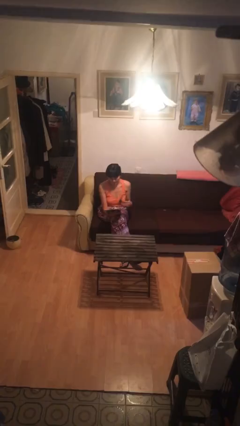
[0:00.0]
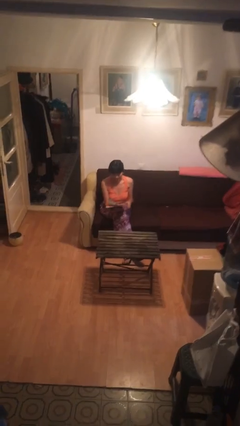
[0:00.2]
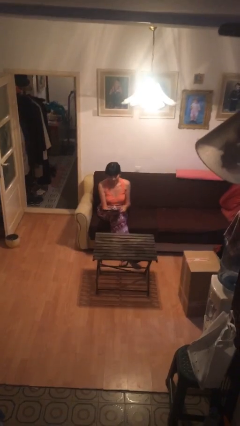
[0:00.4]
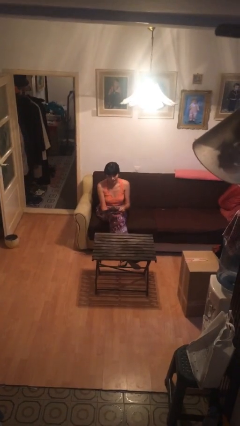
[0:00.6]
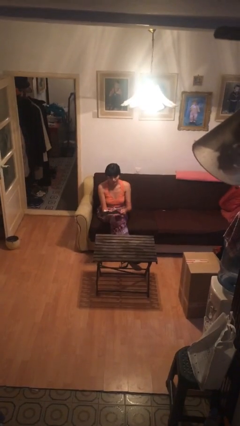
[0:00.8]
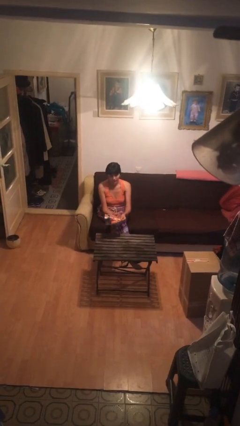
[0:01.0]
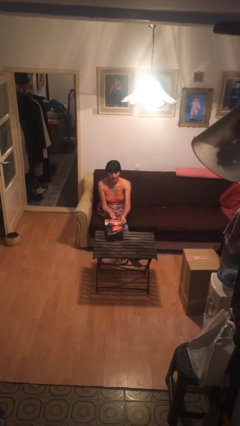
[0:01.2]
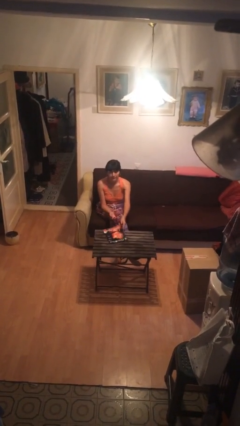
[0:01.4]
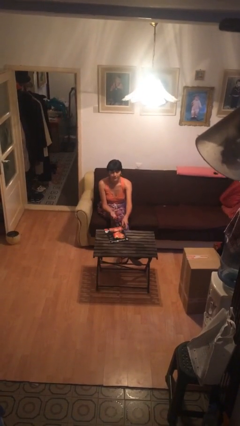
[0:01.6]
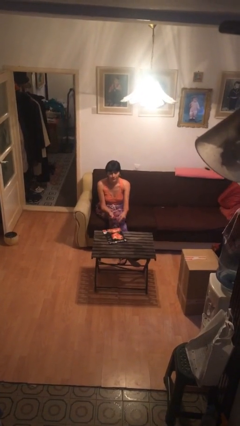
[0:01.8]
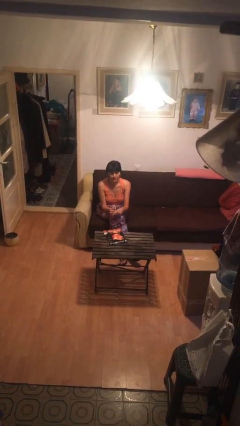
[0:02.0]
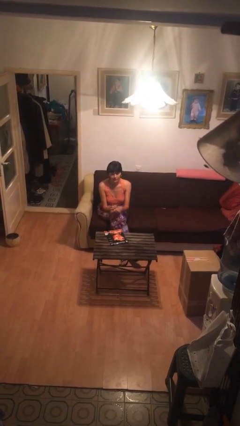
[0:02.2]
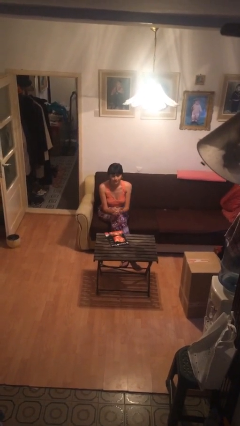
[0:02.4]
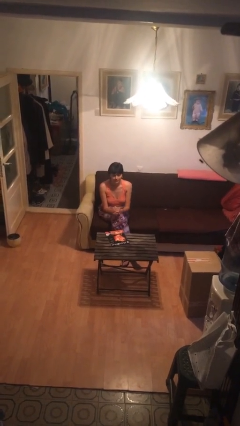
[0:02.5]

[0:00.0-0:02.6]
person puts down object on table

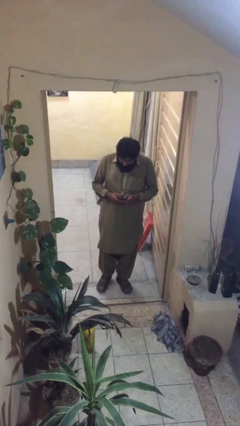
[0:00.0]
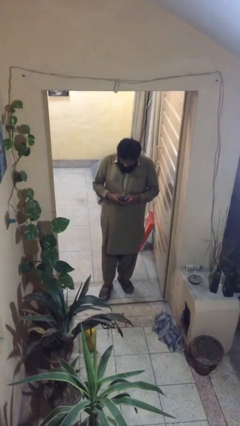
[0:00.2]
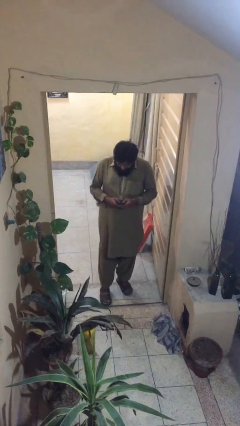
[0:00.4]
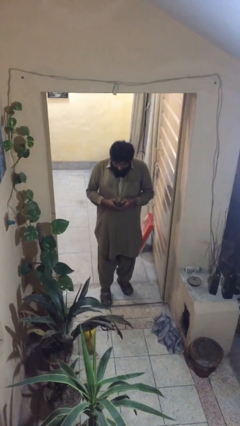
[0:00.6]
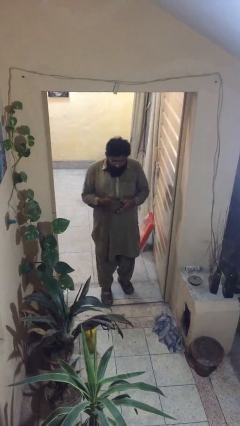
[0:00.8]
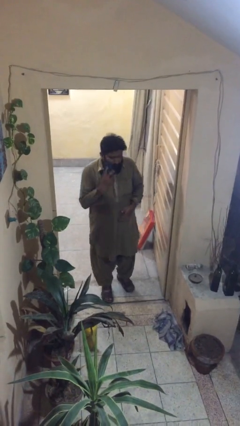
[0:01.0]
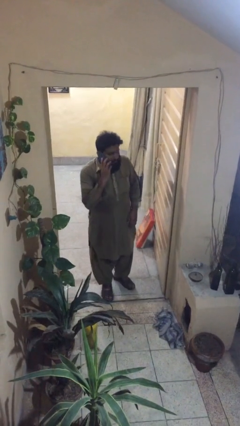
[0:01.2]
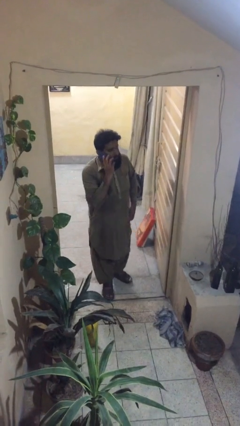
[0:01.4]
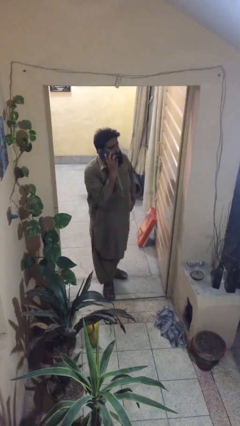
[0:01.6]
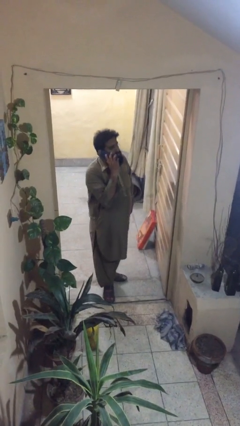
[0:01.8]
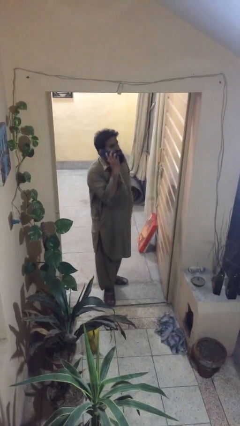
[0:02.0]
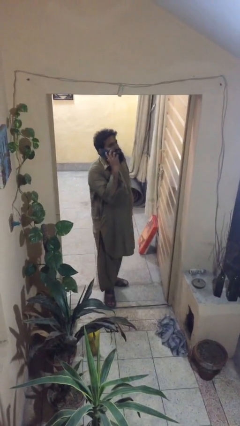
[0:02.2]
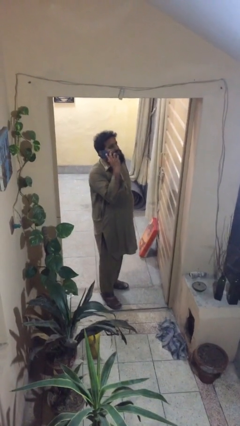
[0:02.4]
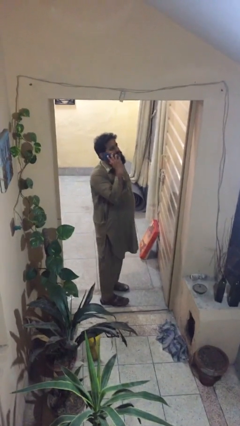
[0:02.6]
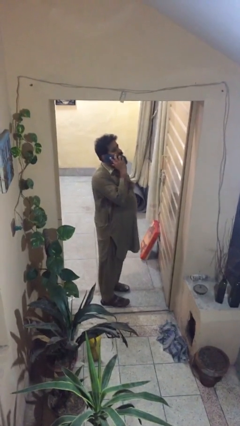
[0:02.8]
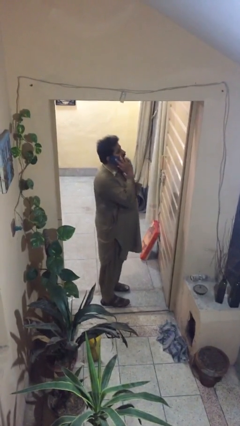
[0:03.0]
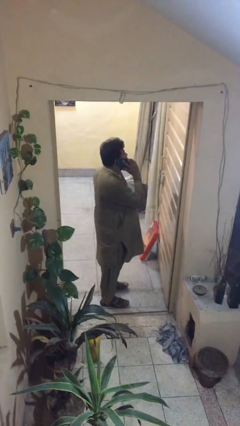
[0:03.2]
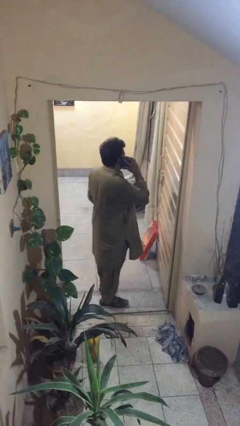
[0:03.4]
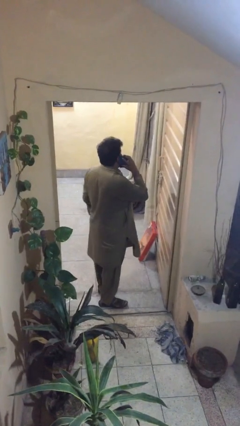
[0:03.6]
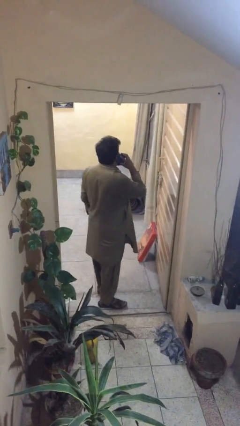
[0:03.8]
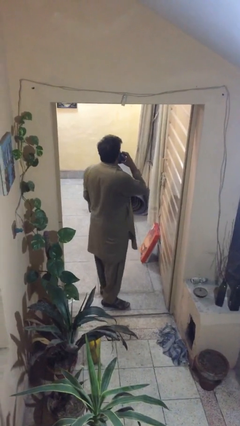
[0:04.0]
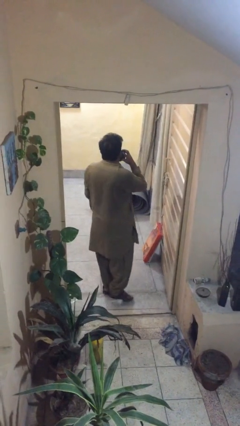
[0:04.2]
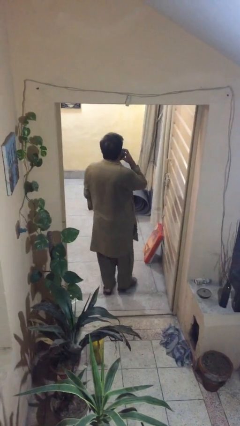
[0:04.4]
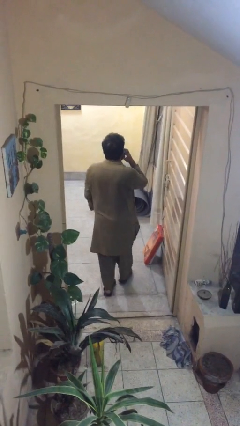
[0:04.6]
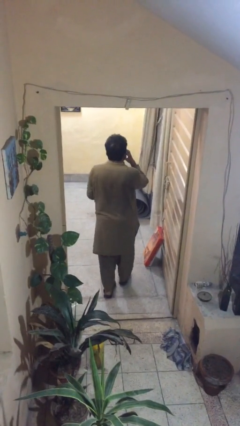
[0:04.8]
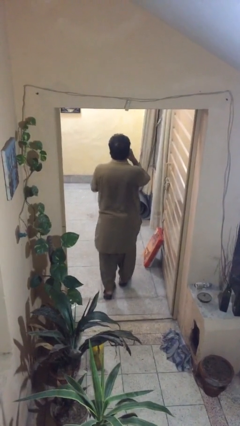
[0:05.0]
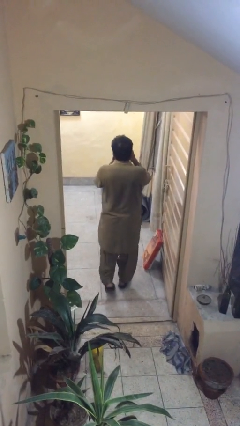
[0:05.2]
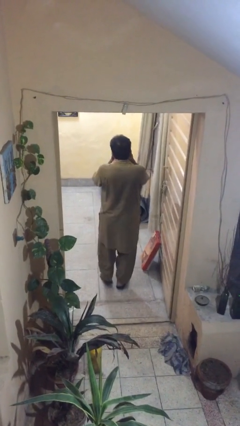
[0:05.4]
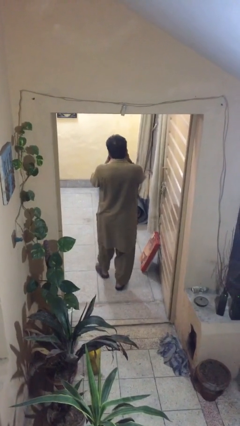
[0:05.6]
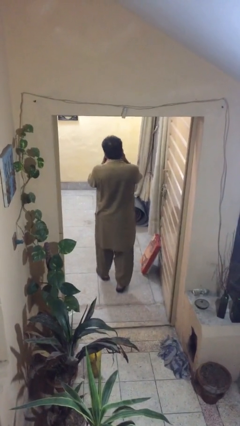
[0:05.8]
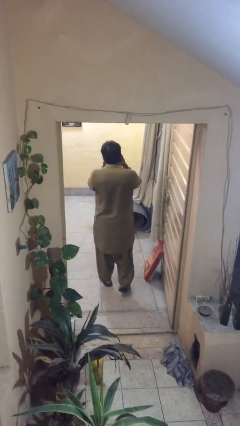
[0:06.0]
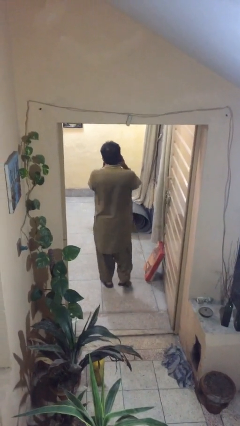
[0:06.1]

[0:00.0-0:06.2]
person talks on phone

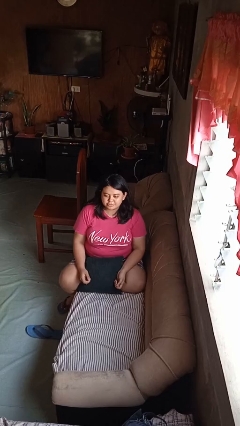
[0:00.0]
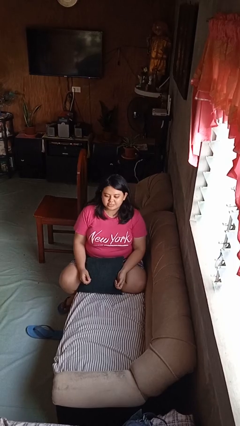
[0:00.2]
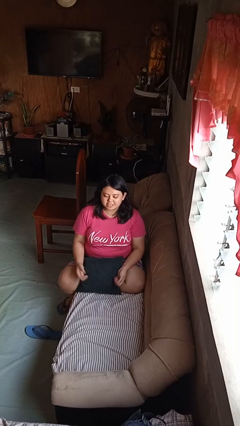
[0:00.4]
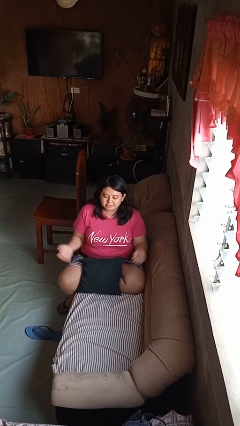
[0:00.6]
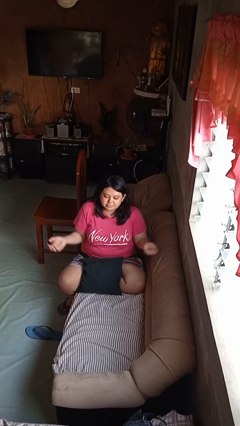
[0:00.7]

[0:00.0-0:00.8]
person shrugs

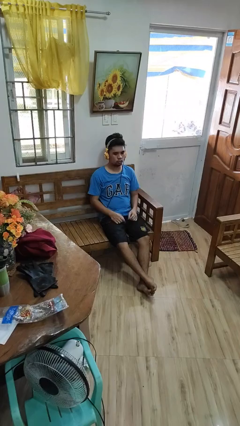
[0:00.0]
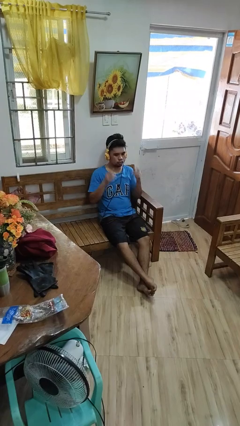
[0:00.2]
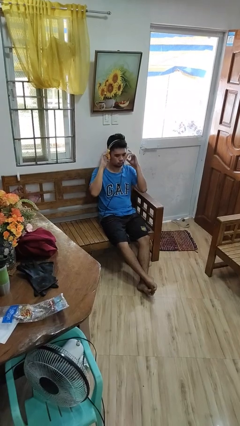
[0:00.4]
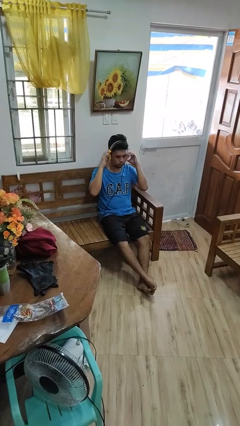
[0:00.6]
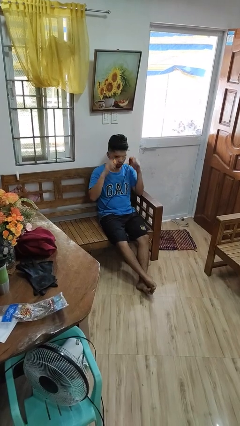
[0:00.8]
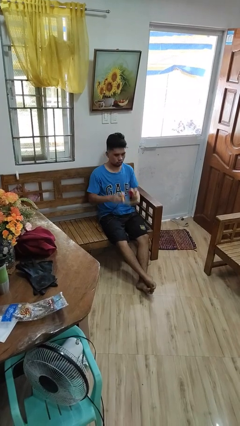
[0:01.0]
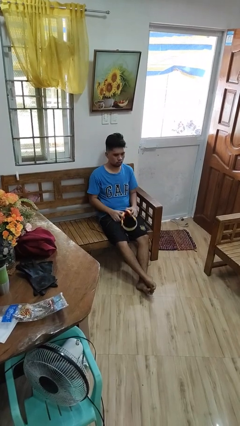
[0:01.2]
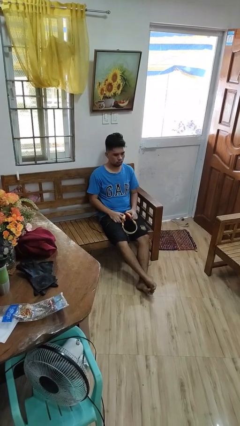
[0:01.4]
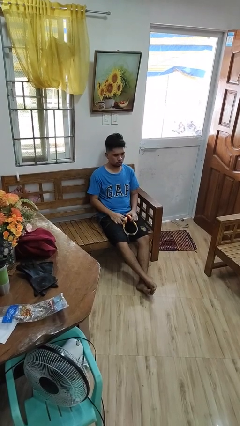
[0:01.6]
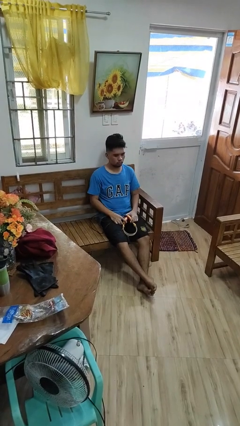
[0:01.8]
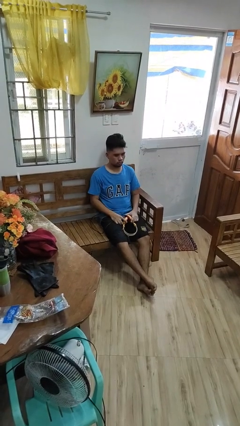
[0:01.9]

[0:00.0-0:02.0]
person takes off headphones

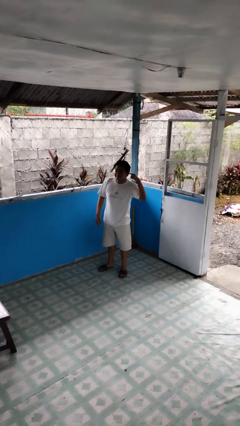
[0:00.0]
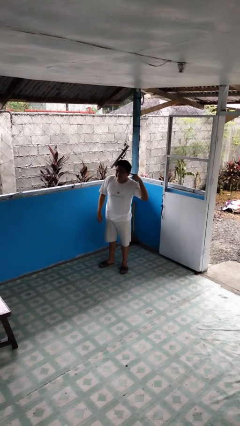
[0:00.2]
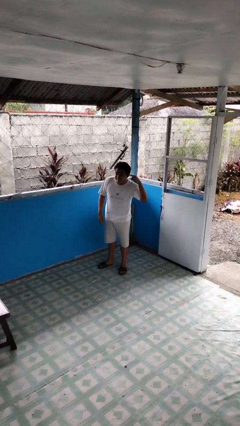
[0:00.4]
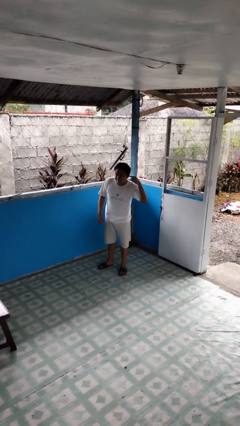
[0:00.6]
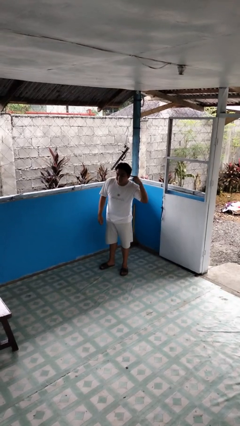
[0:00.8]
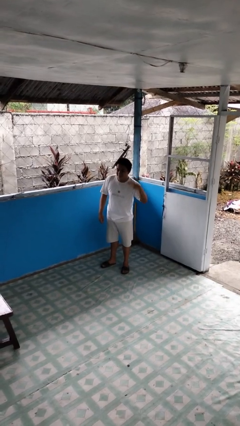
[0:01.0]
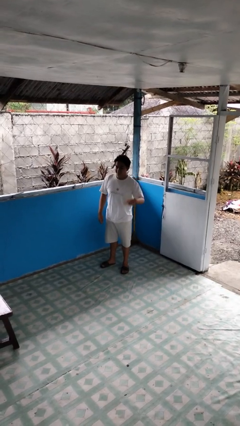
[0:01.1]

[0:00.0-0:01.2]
person gestures listen closely

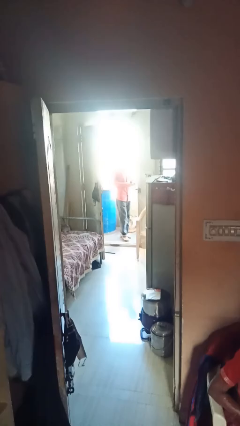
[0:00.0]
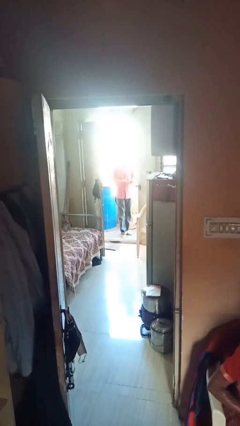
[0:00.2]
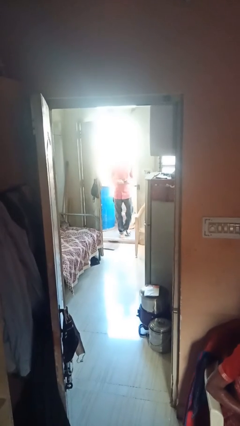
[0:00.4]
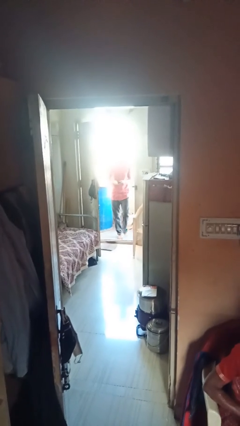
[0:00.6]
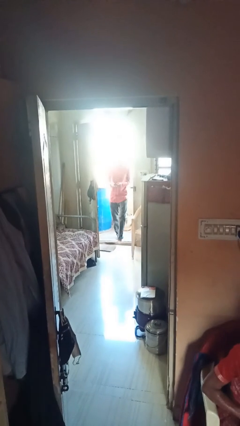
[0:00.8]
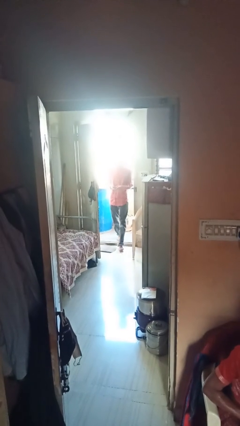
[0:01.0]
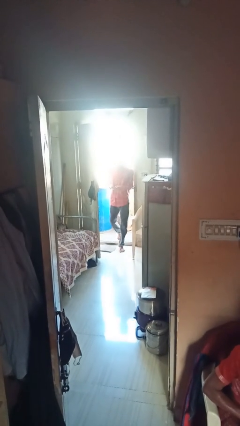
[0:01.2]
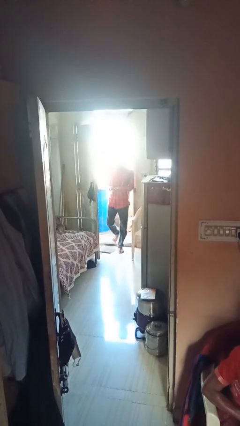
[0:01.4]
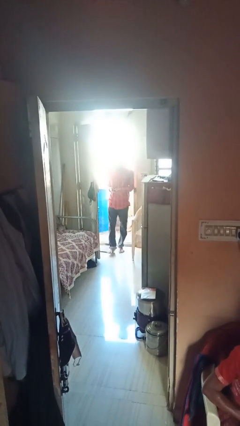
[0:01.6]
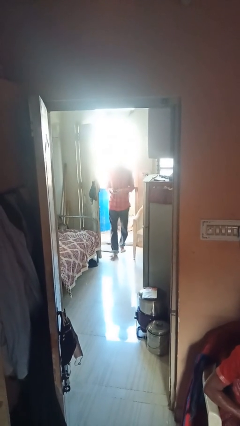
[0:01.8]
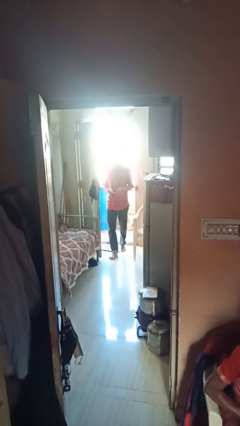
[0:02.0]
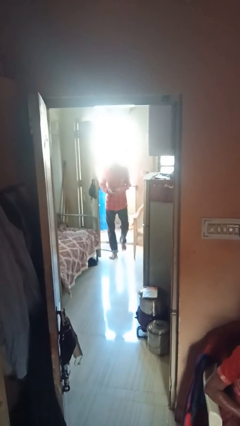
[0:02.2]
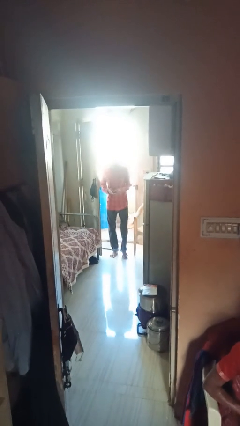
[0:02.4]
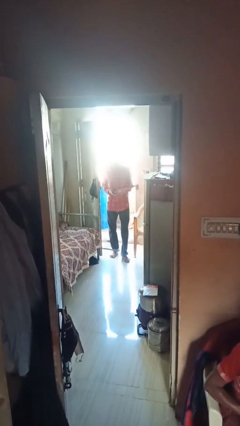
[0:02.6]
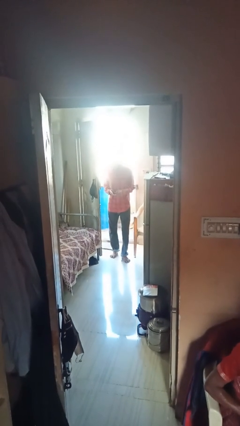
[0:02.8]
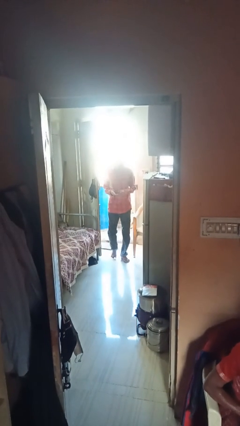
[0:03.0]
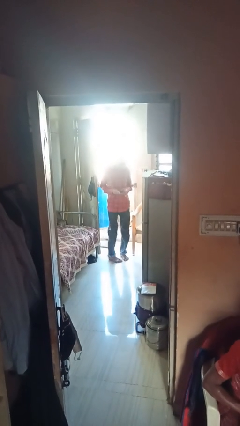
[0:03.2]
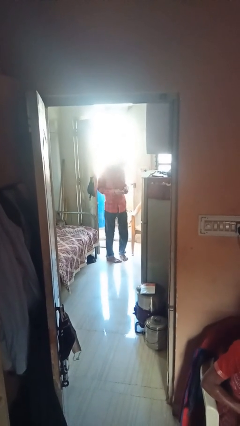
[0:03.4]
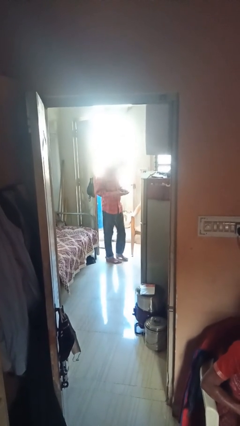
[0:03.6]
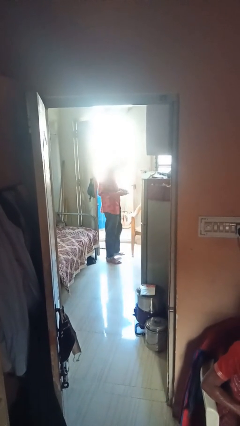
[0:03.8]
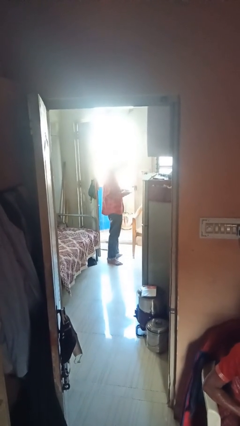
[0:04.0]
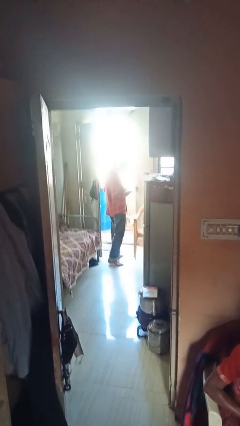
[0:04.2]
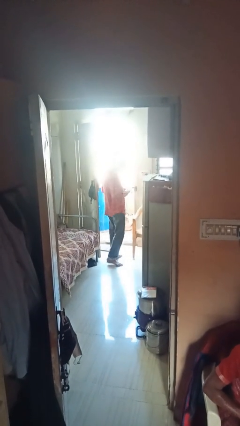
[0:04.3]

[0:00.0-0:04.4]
person enters scene through structure

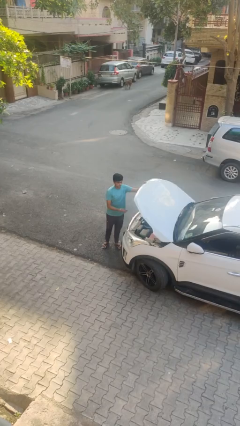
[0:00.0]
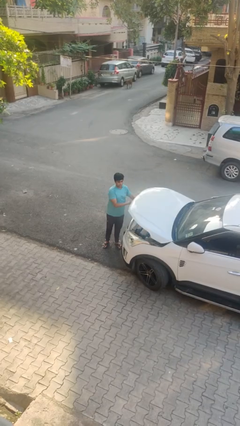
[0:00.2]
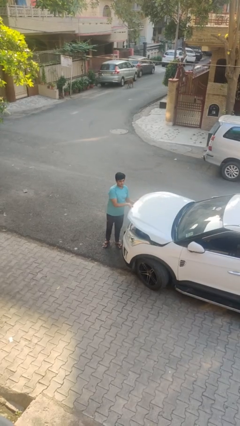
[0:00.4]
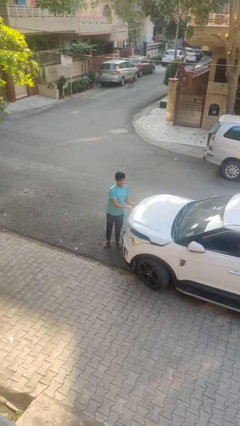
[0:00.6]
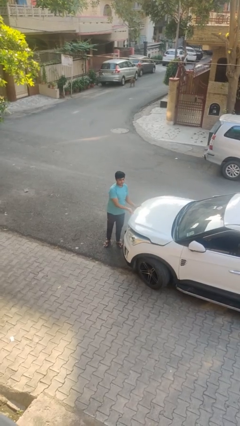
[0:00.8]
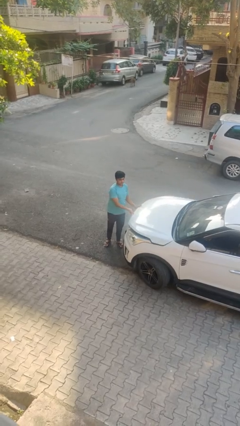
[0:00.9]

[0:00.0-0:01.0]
person closes car hood
